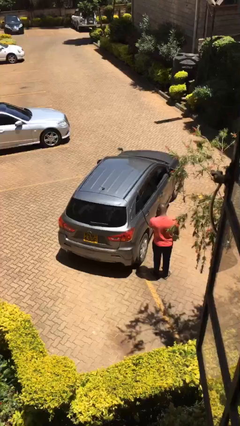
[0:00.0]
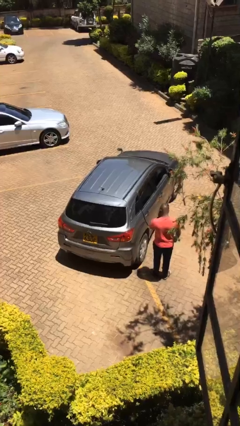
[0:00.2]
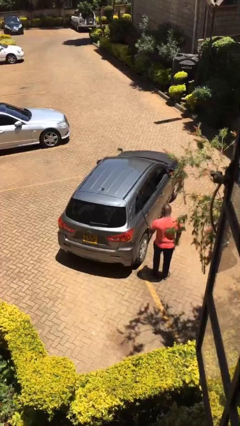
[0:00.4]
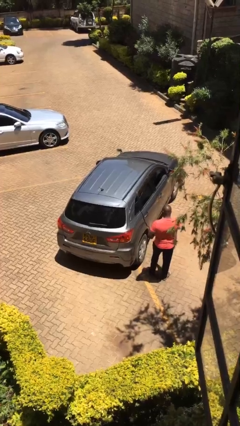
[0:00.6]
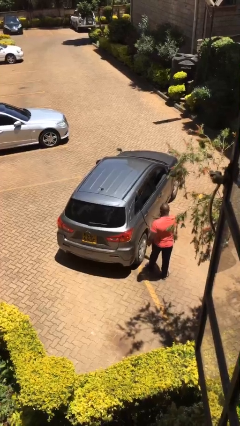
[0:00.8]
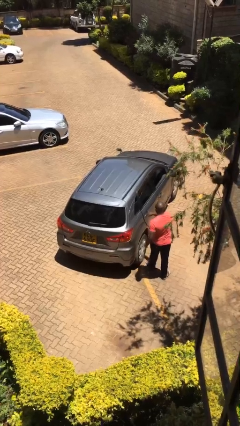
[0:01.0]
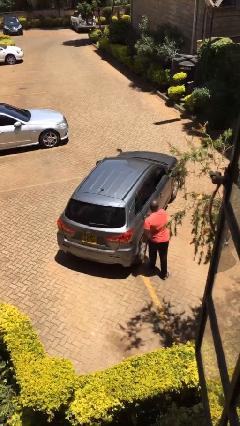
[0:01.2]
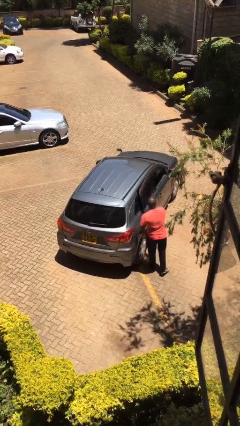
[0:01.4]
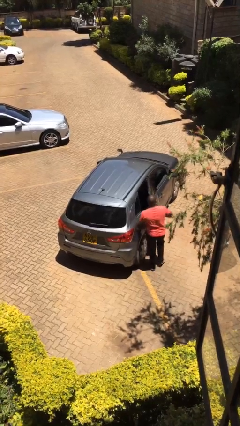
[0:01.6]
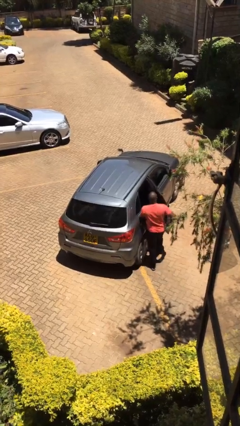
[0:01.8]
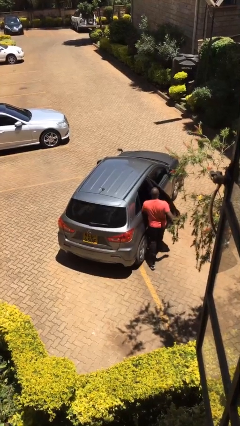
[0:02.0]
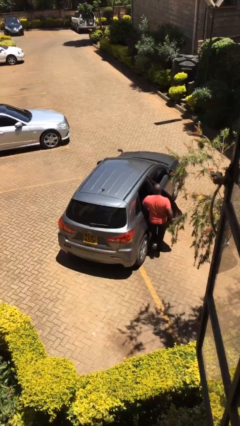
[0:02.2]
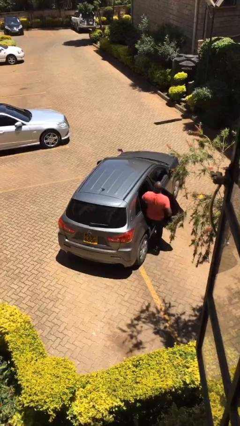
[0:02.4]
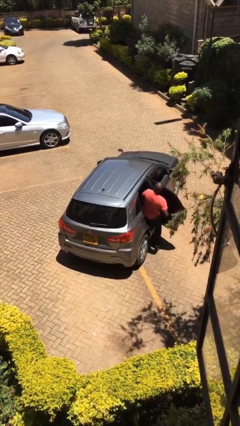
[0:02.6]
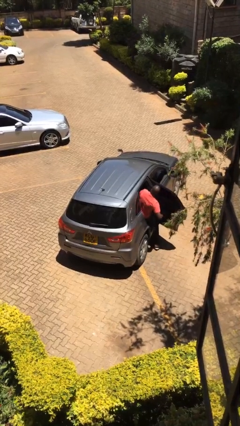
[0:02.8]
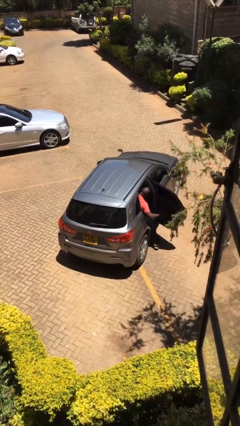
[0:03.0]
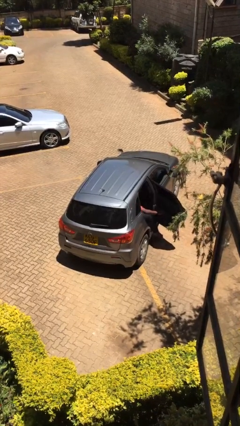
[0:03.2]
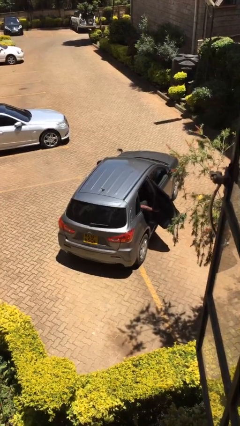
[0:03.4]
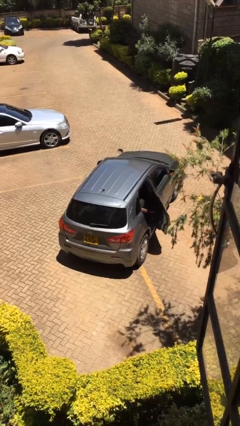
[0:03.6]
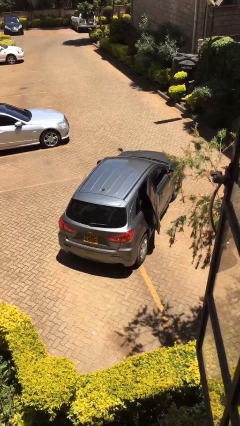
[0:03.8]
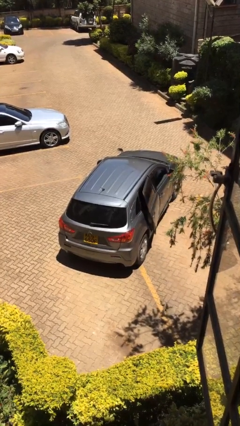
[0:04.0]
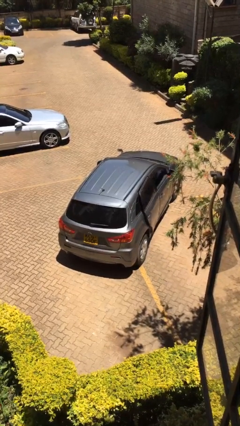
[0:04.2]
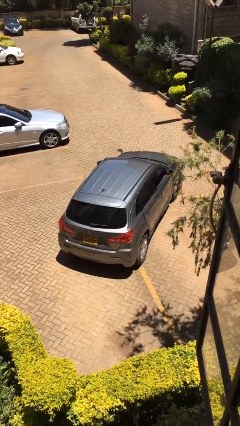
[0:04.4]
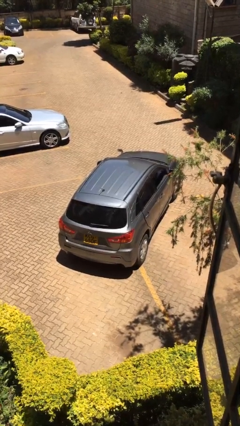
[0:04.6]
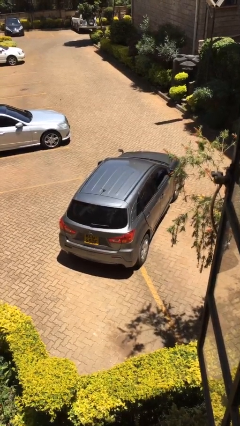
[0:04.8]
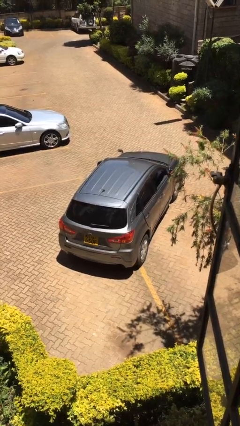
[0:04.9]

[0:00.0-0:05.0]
car picks up person

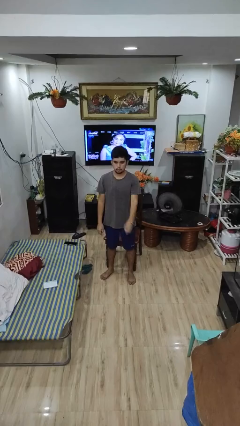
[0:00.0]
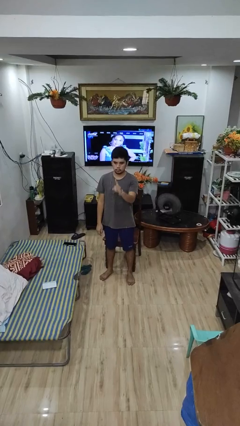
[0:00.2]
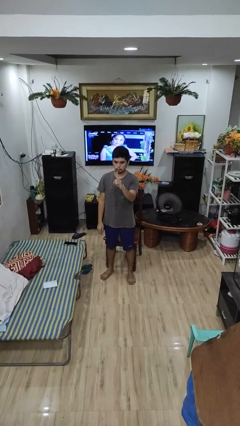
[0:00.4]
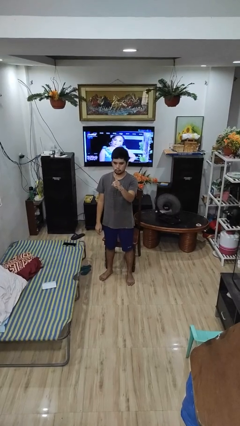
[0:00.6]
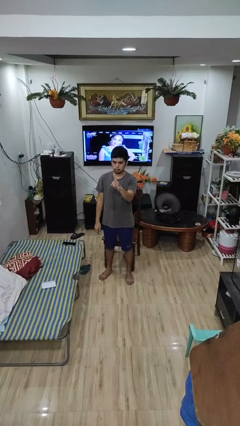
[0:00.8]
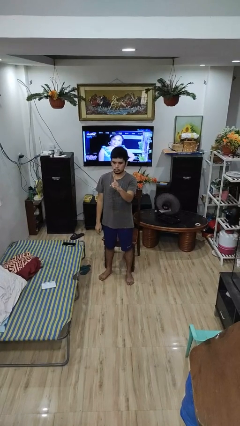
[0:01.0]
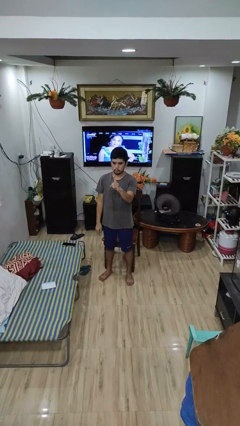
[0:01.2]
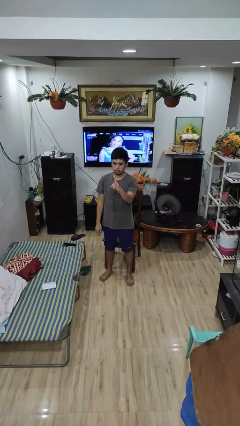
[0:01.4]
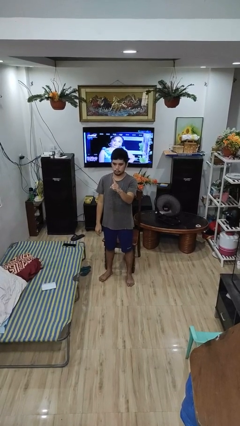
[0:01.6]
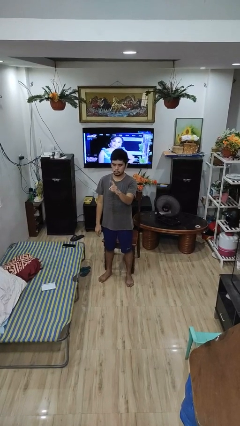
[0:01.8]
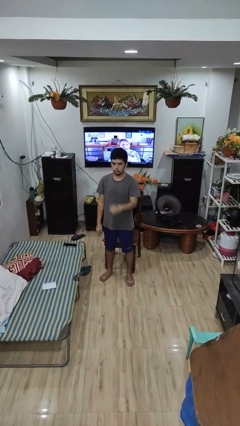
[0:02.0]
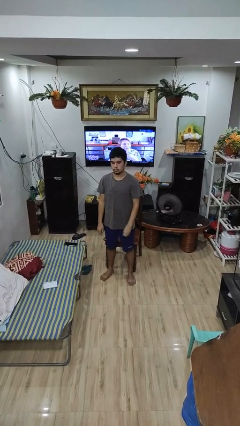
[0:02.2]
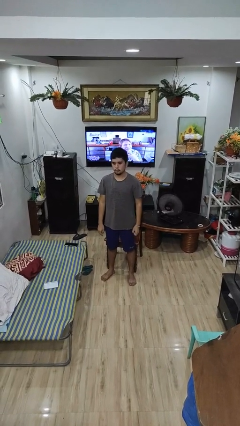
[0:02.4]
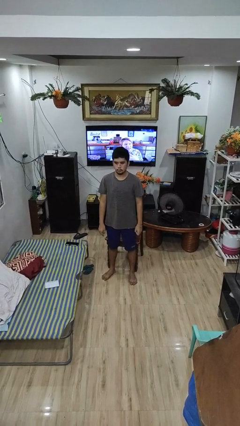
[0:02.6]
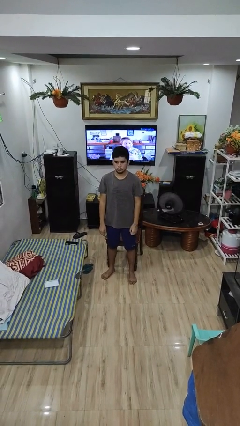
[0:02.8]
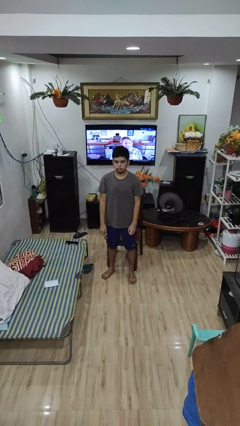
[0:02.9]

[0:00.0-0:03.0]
person gestures number one

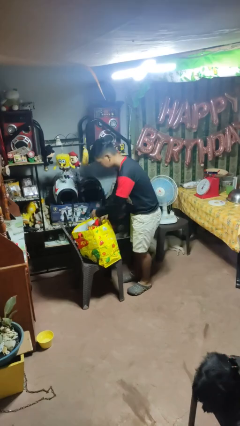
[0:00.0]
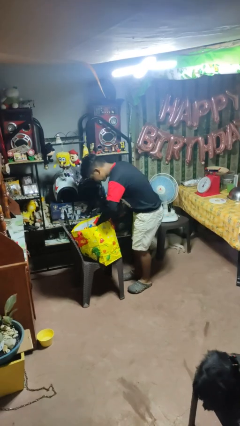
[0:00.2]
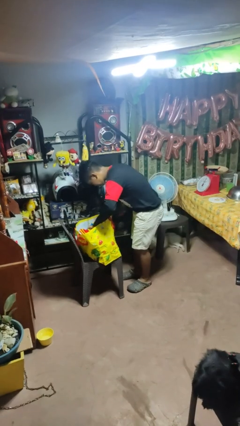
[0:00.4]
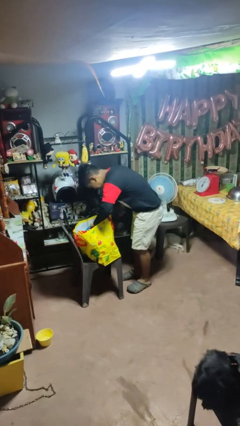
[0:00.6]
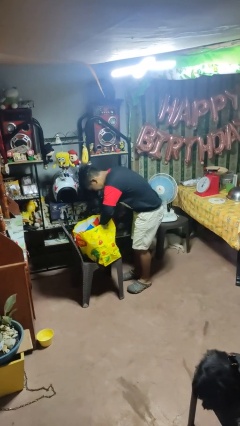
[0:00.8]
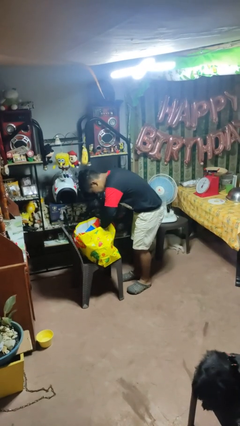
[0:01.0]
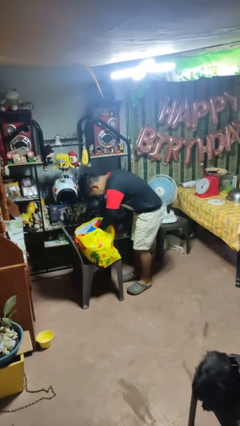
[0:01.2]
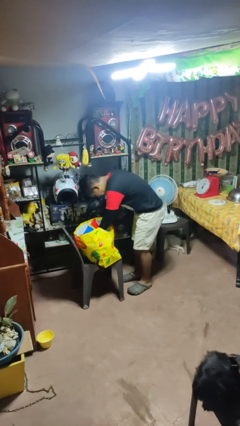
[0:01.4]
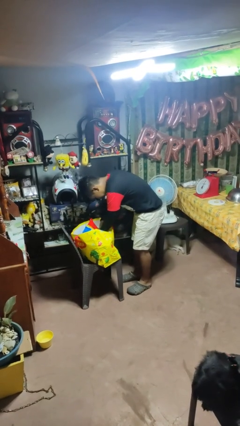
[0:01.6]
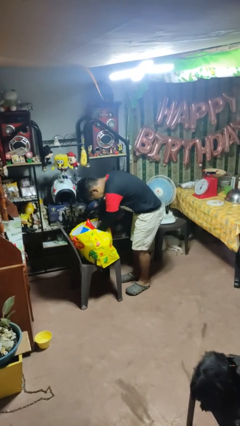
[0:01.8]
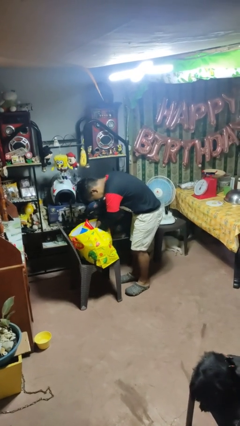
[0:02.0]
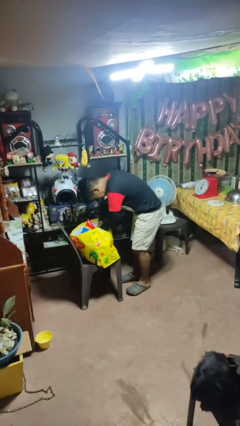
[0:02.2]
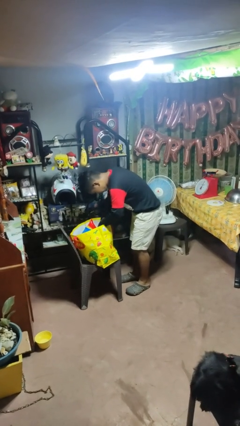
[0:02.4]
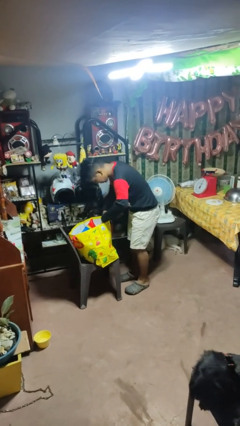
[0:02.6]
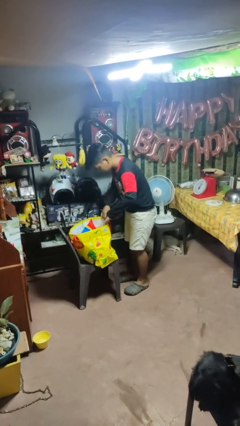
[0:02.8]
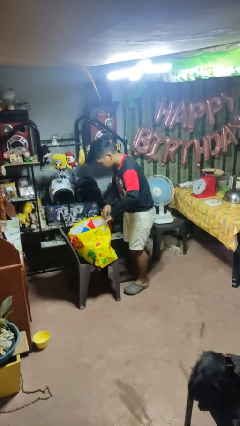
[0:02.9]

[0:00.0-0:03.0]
person searches in bag

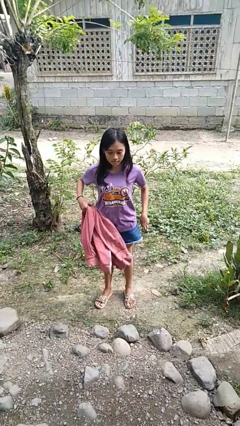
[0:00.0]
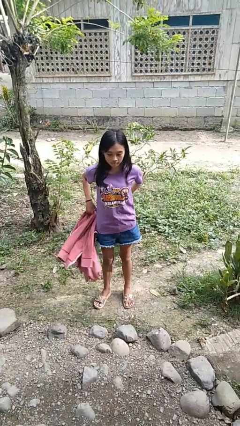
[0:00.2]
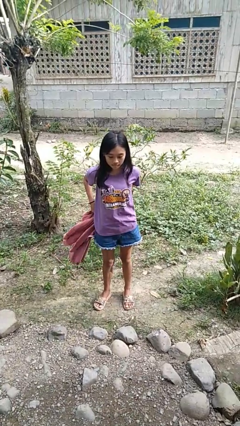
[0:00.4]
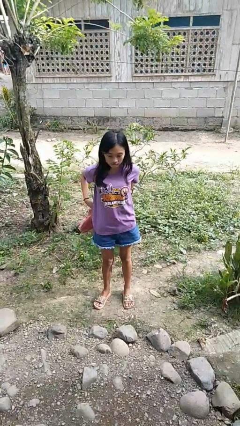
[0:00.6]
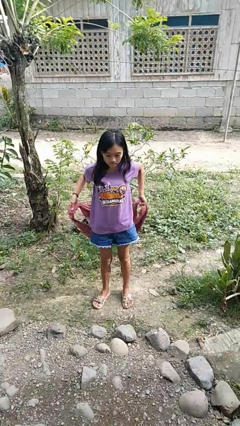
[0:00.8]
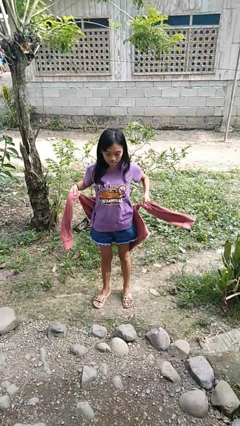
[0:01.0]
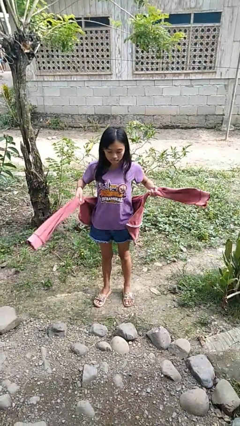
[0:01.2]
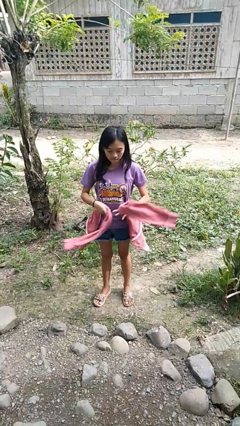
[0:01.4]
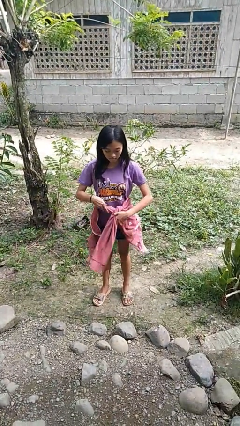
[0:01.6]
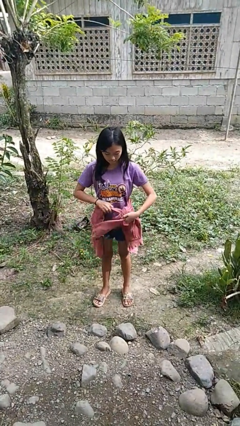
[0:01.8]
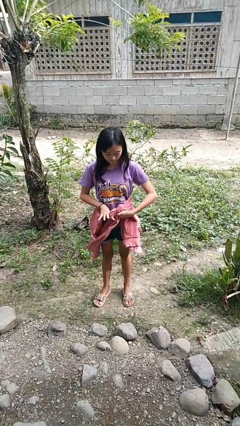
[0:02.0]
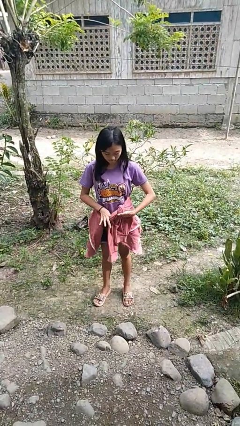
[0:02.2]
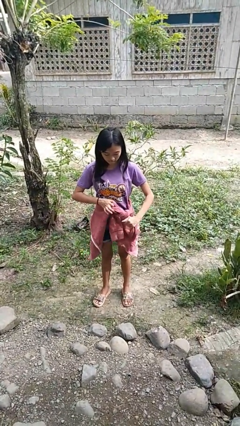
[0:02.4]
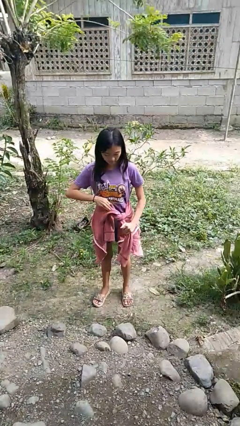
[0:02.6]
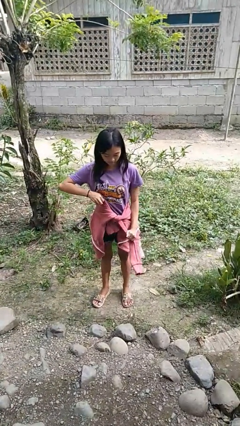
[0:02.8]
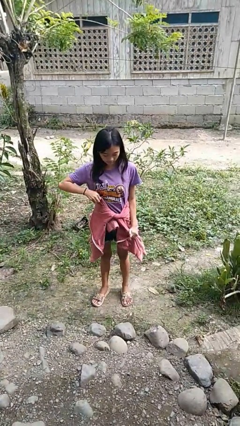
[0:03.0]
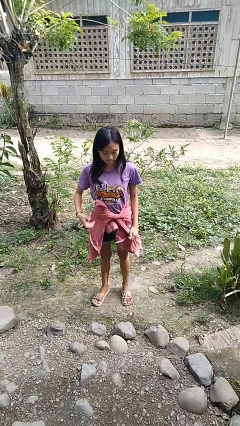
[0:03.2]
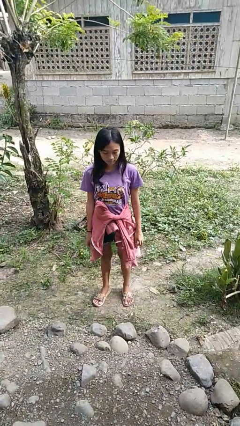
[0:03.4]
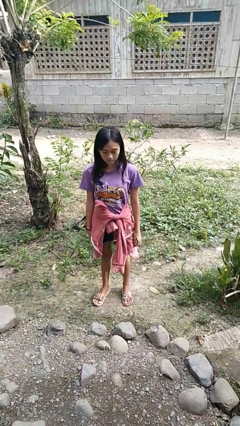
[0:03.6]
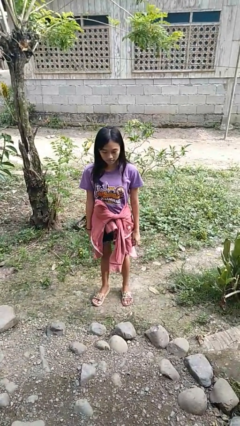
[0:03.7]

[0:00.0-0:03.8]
person ties jacket around waist

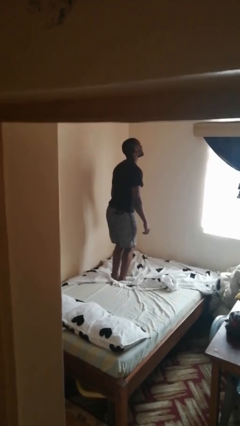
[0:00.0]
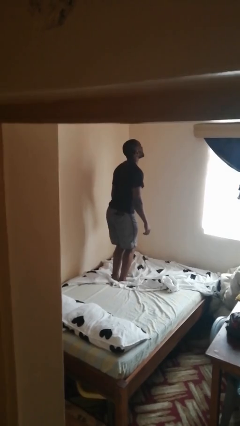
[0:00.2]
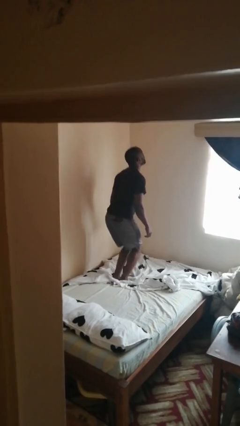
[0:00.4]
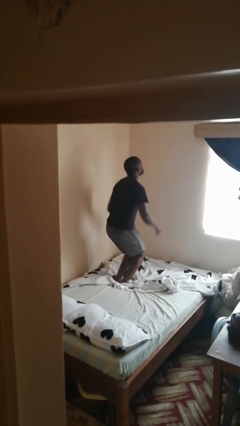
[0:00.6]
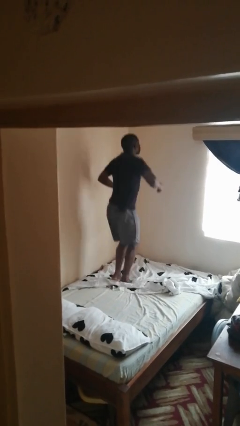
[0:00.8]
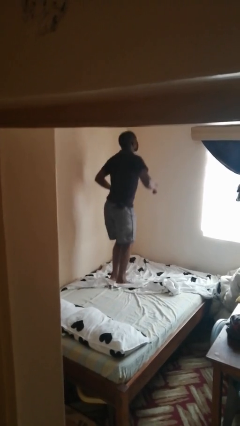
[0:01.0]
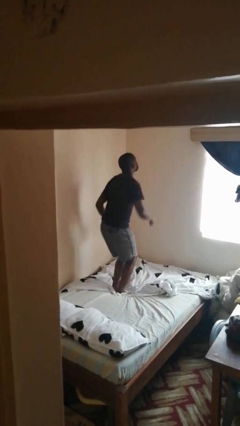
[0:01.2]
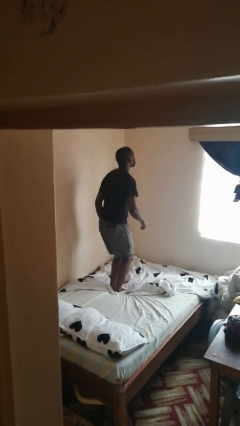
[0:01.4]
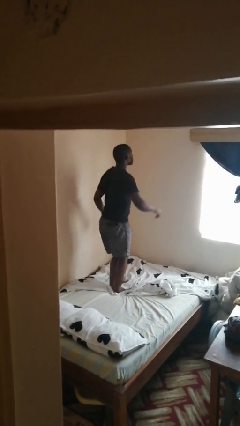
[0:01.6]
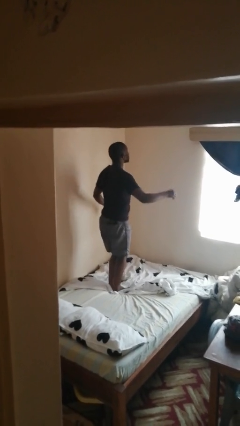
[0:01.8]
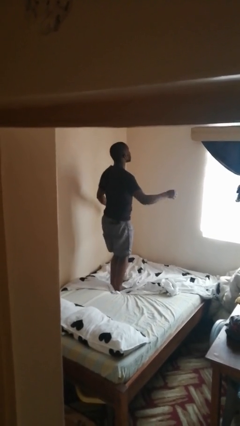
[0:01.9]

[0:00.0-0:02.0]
person jumps on bed

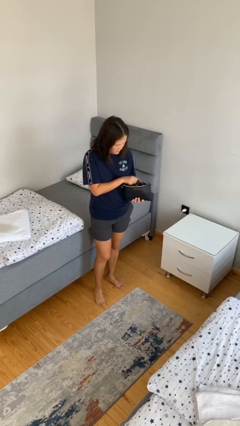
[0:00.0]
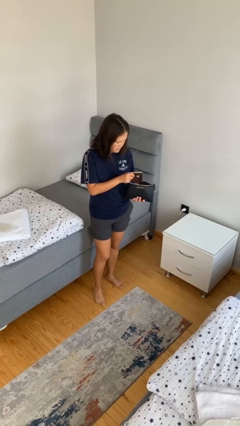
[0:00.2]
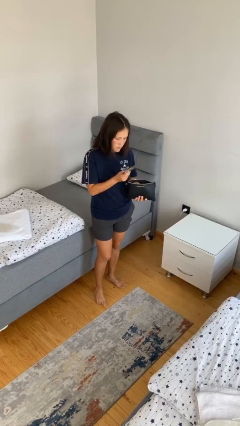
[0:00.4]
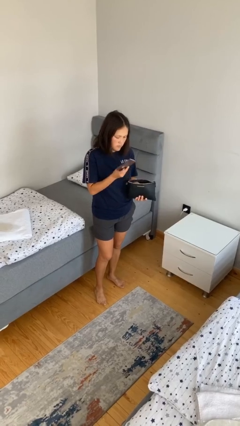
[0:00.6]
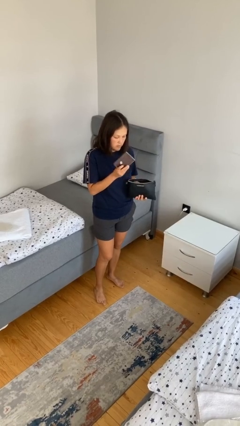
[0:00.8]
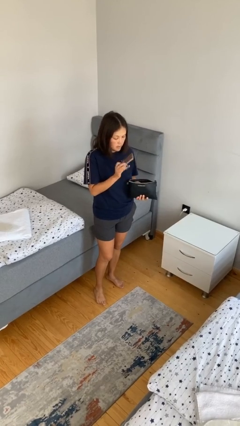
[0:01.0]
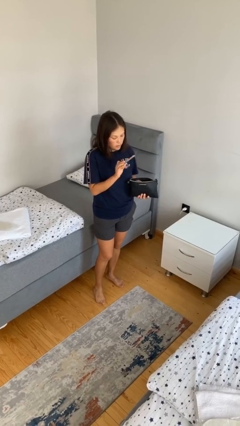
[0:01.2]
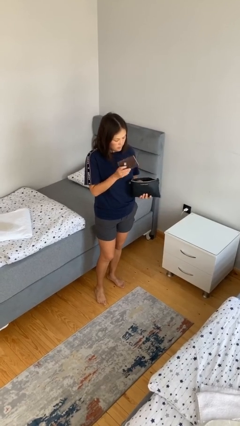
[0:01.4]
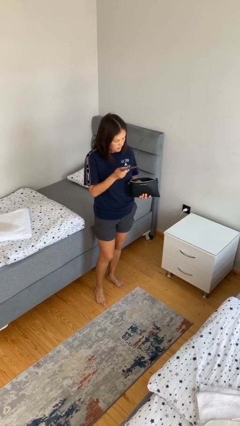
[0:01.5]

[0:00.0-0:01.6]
person takes object from purse
